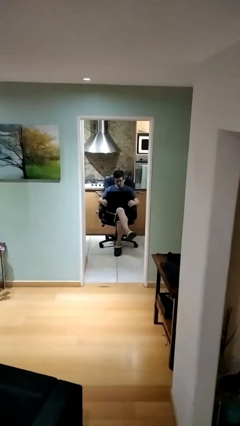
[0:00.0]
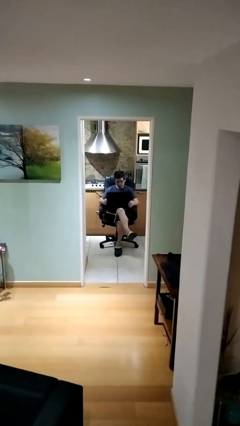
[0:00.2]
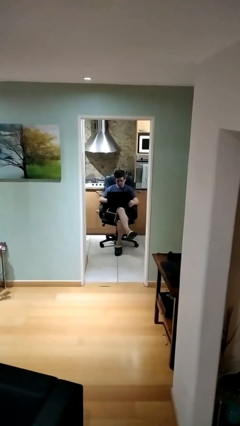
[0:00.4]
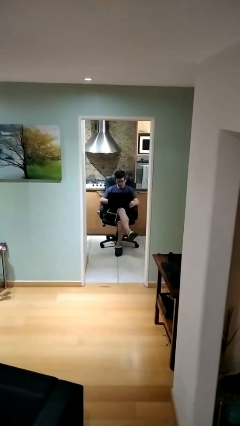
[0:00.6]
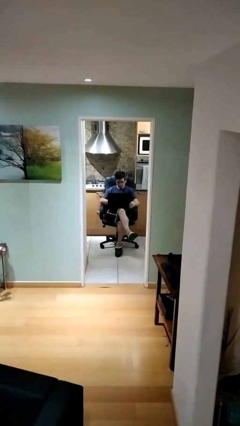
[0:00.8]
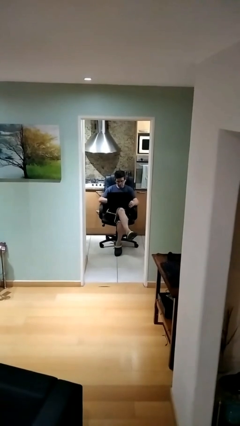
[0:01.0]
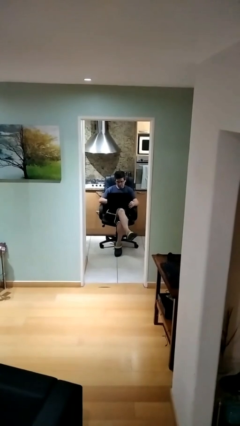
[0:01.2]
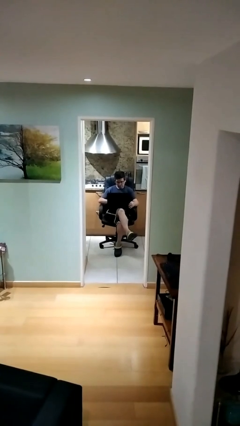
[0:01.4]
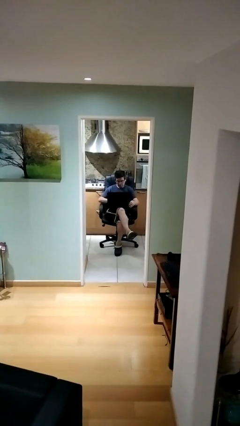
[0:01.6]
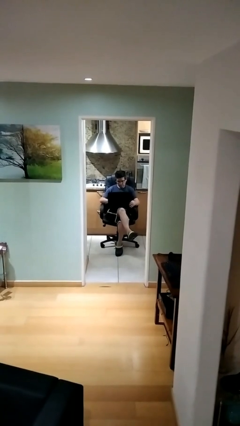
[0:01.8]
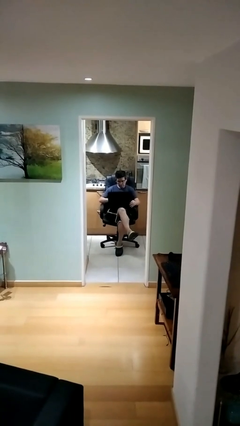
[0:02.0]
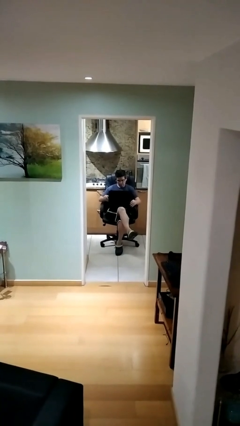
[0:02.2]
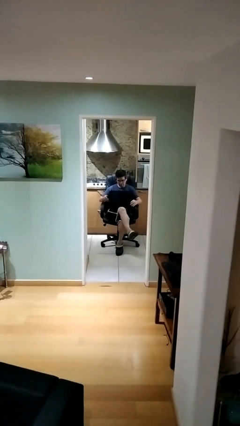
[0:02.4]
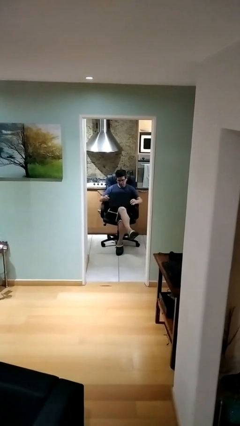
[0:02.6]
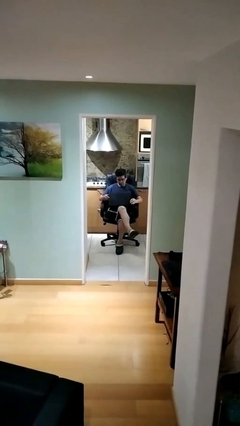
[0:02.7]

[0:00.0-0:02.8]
person interacts with laptop

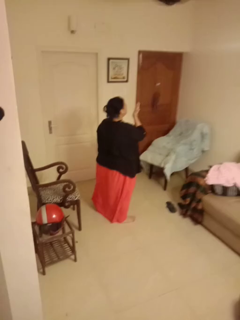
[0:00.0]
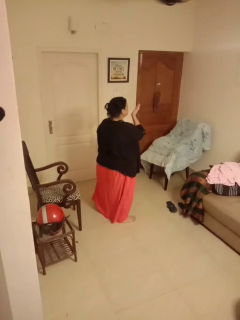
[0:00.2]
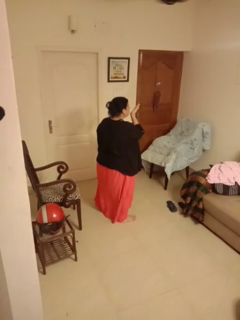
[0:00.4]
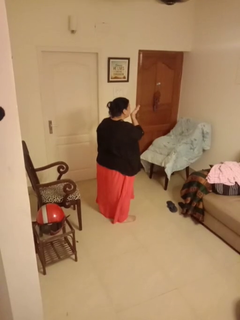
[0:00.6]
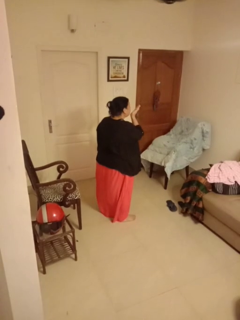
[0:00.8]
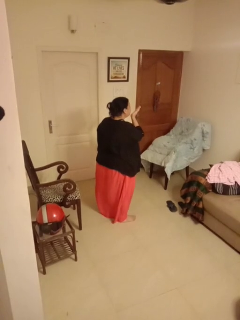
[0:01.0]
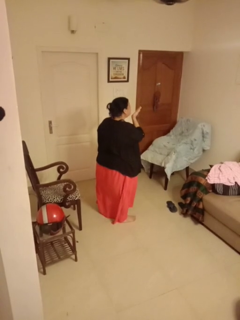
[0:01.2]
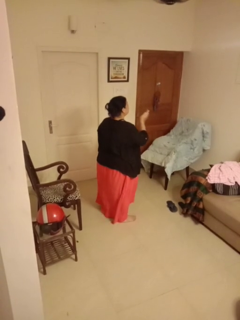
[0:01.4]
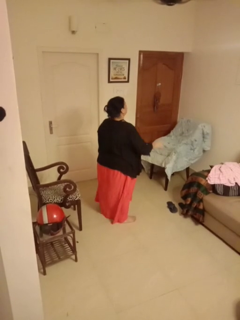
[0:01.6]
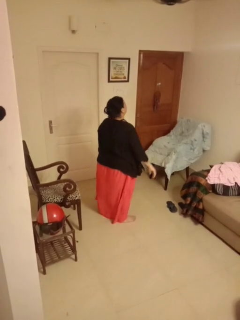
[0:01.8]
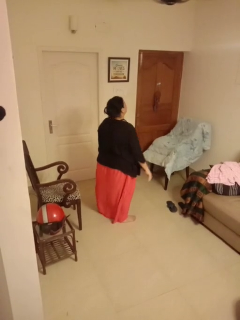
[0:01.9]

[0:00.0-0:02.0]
person gestures blow kiss

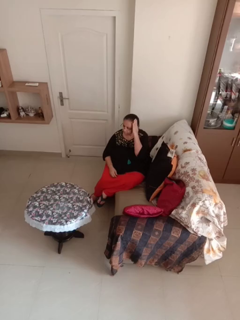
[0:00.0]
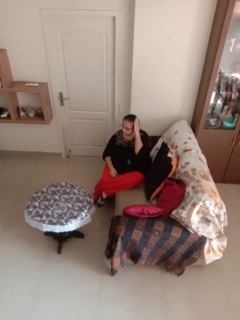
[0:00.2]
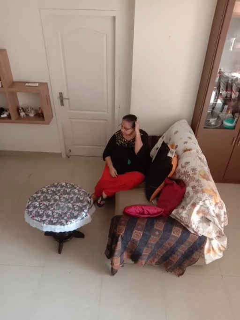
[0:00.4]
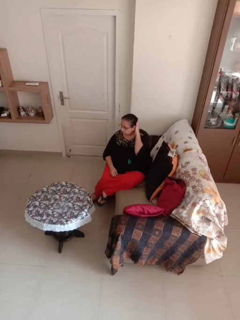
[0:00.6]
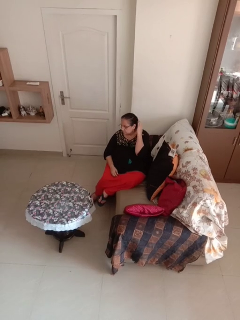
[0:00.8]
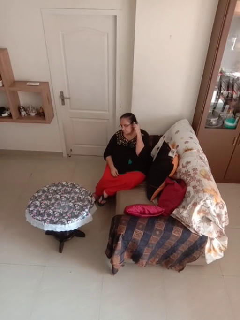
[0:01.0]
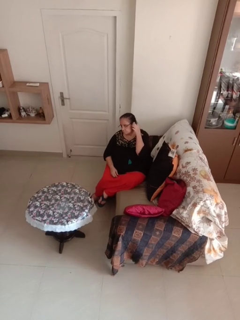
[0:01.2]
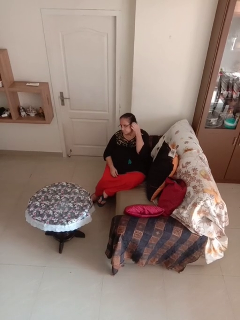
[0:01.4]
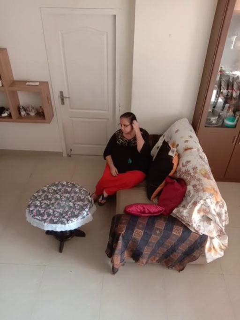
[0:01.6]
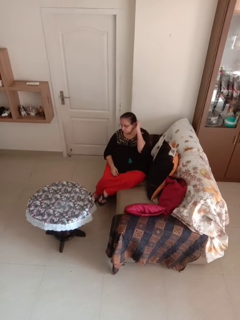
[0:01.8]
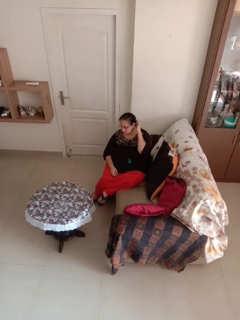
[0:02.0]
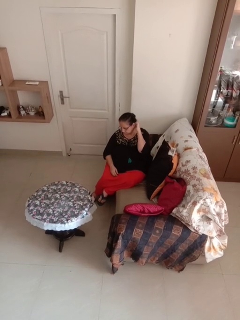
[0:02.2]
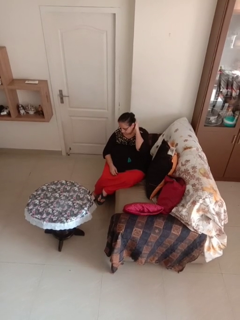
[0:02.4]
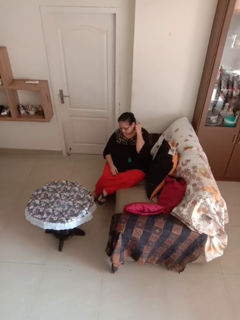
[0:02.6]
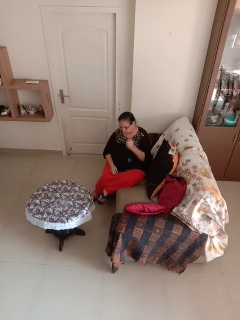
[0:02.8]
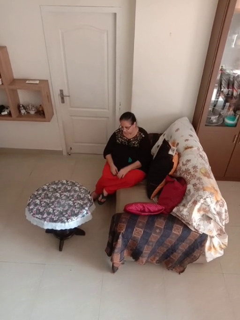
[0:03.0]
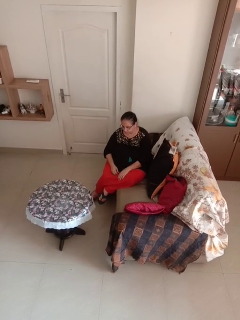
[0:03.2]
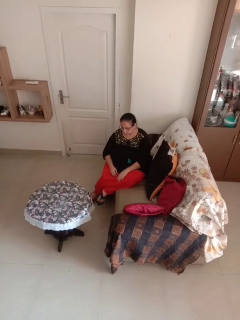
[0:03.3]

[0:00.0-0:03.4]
person strokes hair

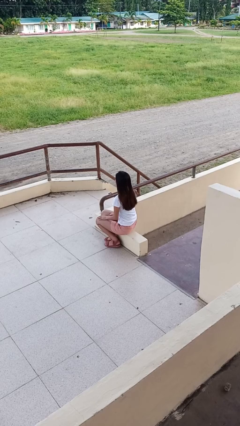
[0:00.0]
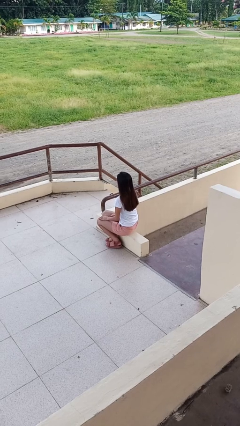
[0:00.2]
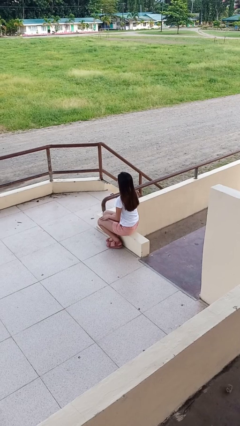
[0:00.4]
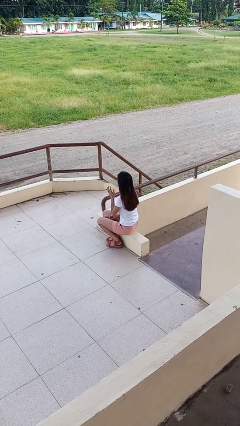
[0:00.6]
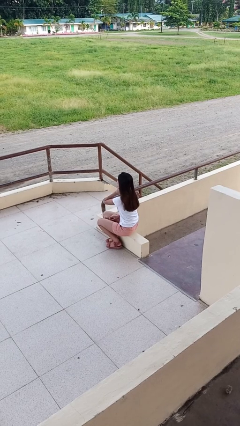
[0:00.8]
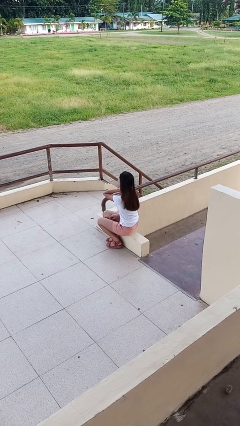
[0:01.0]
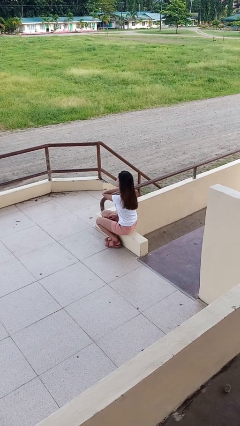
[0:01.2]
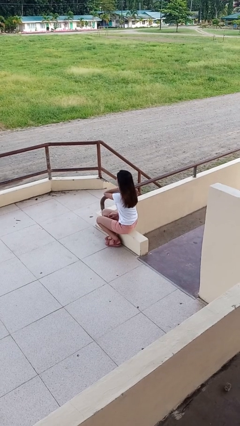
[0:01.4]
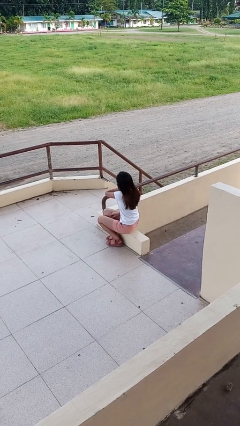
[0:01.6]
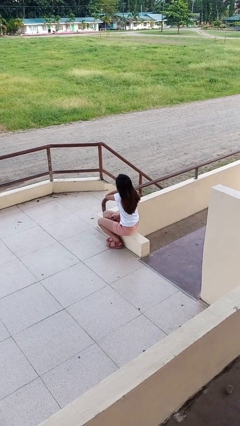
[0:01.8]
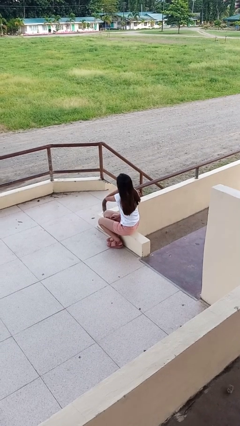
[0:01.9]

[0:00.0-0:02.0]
person rubs neck

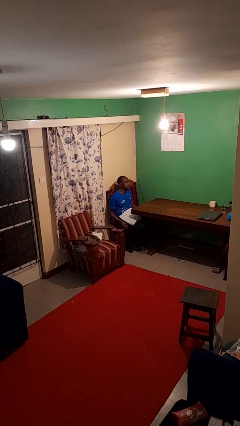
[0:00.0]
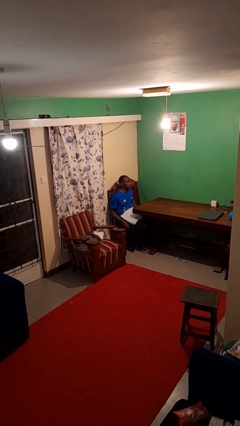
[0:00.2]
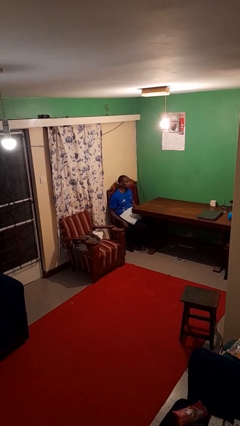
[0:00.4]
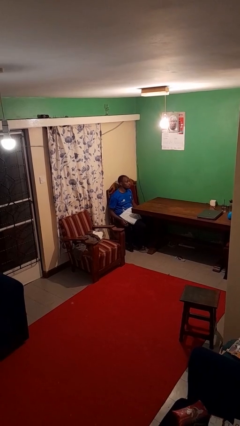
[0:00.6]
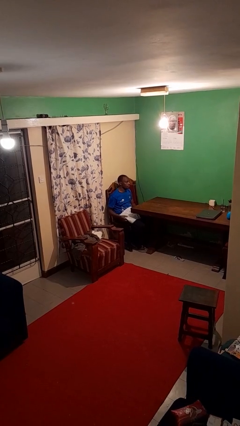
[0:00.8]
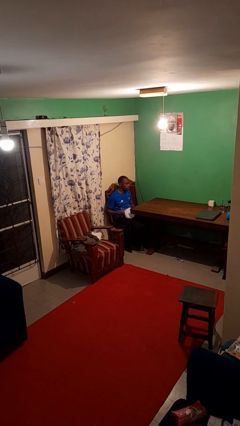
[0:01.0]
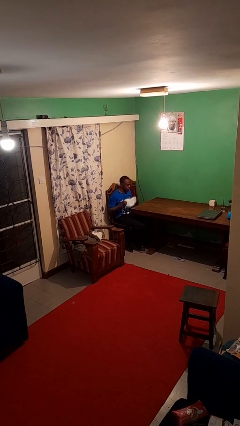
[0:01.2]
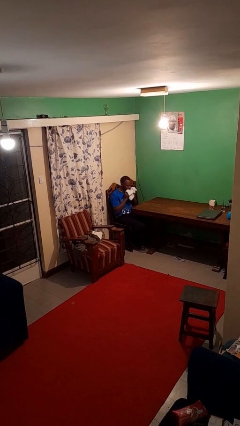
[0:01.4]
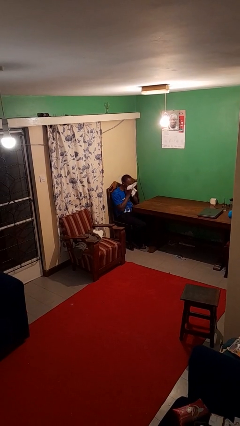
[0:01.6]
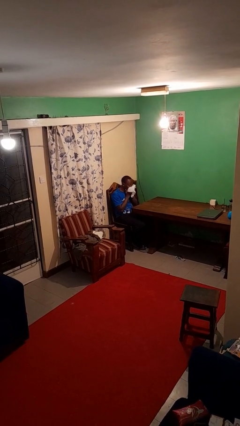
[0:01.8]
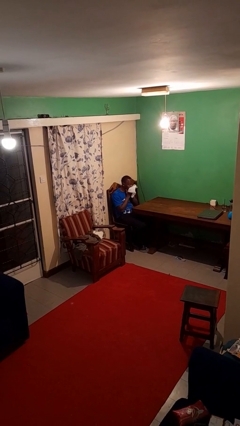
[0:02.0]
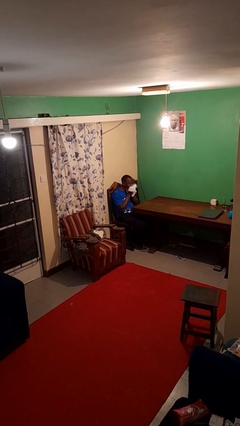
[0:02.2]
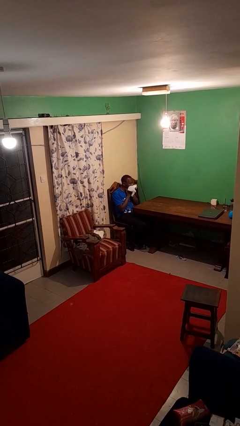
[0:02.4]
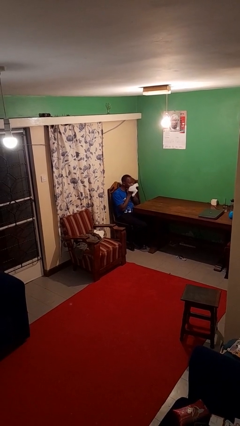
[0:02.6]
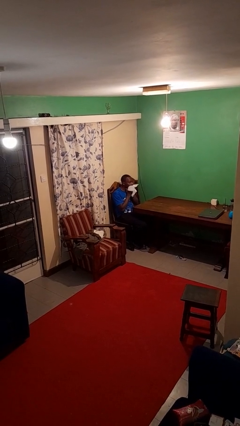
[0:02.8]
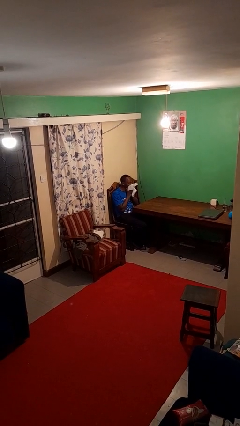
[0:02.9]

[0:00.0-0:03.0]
person wipes mouth with napkin

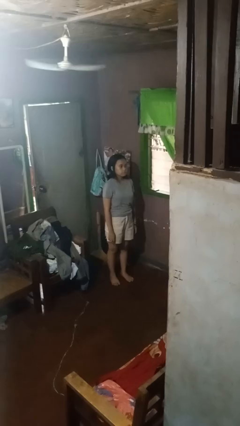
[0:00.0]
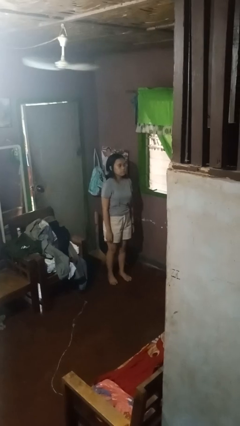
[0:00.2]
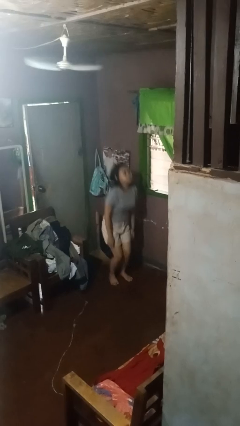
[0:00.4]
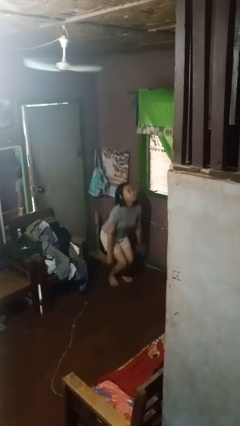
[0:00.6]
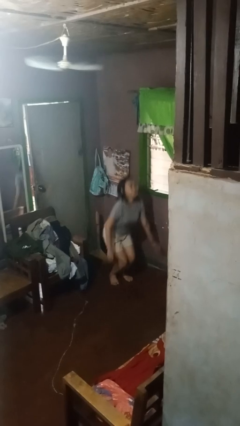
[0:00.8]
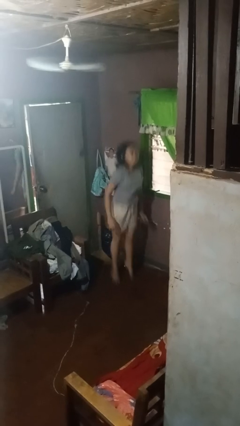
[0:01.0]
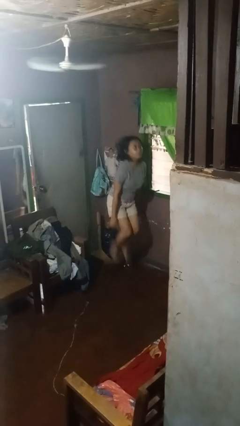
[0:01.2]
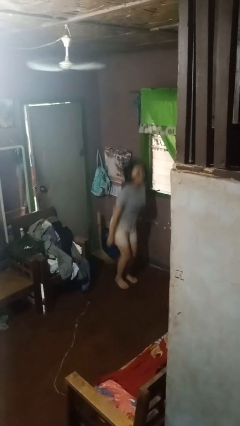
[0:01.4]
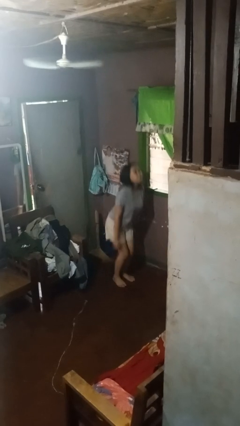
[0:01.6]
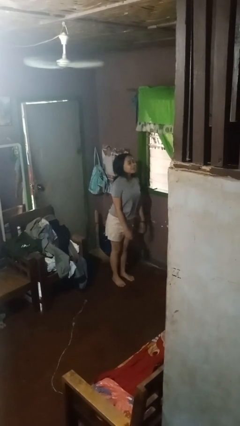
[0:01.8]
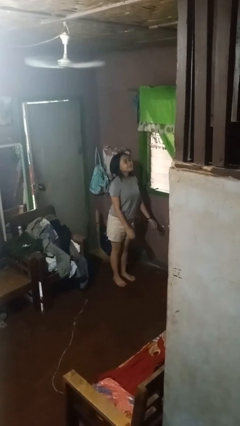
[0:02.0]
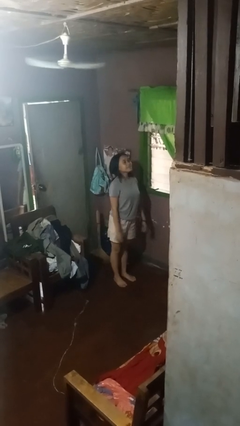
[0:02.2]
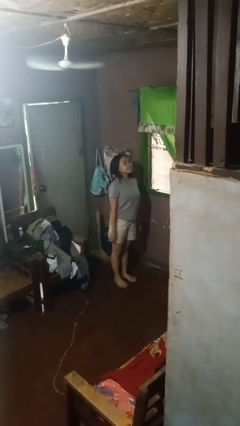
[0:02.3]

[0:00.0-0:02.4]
person jumps

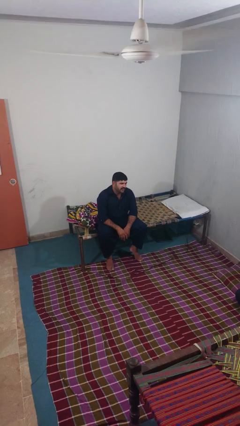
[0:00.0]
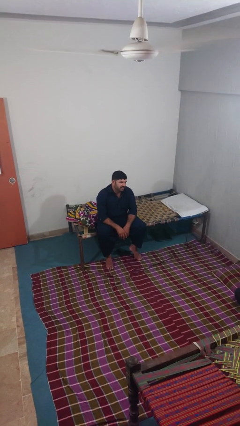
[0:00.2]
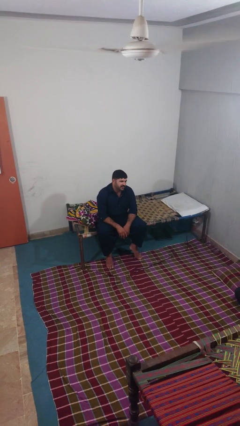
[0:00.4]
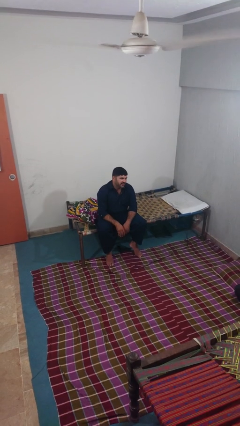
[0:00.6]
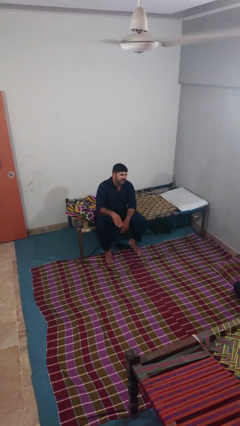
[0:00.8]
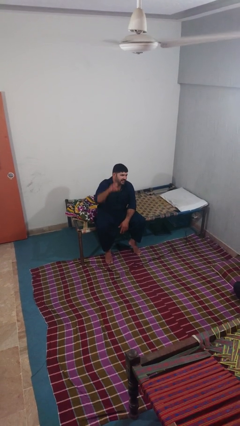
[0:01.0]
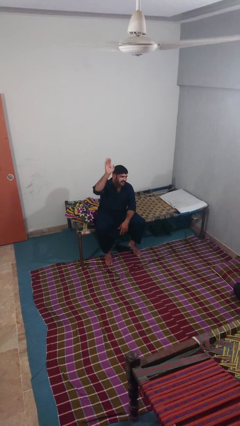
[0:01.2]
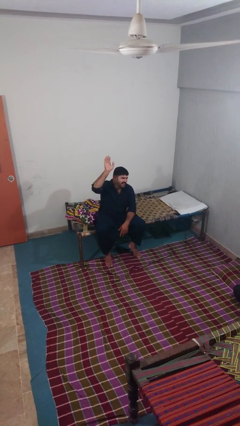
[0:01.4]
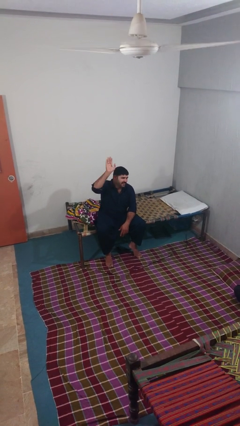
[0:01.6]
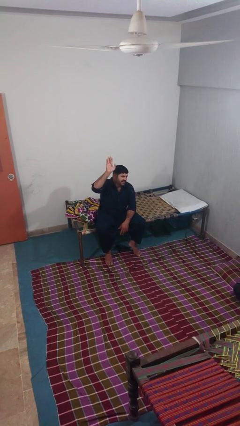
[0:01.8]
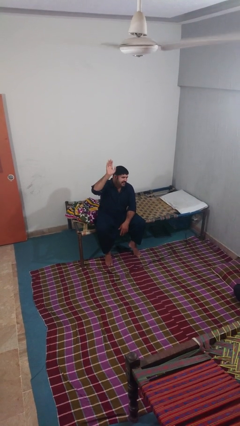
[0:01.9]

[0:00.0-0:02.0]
person gestures swipe up

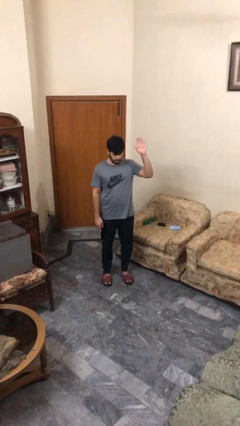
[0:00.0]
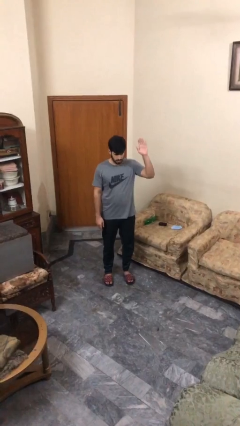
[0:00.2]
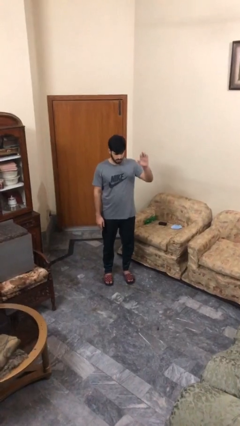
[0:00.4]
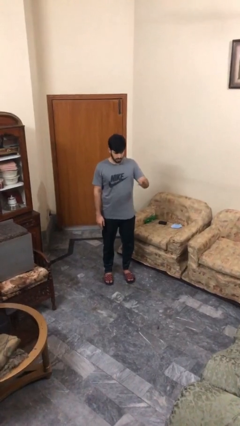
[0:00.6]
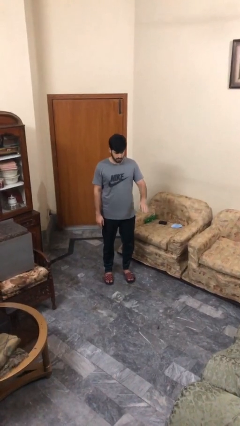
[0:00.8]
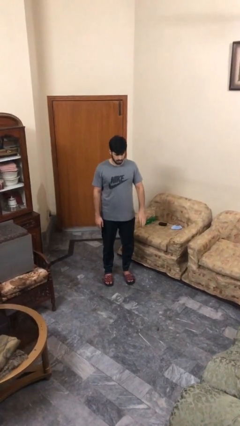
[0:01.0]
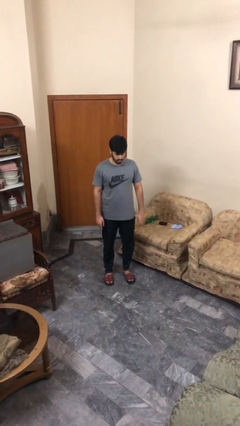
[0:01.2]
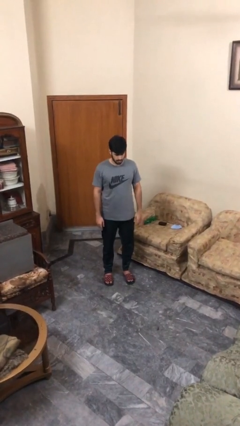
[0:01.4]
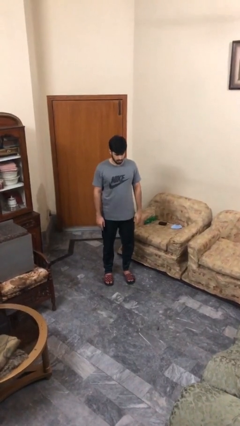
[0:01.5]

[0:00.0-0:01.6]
person gestures lower hand
